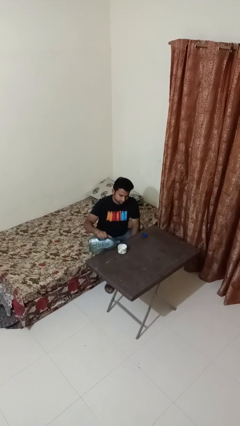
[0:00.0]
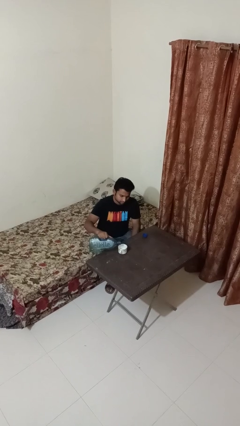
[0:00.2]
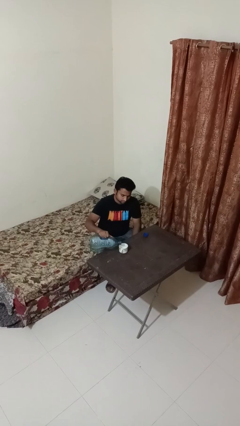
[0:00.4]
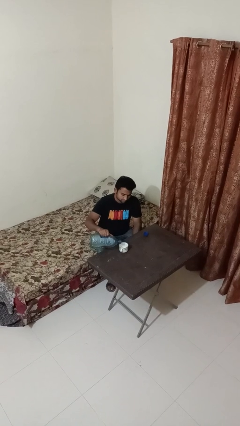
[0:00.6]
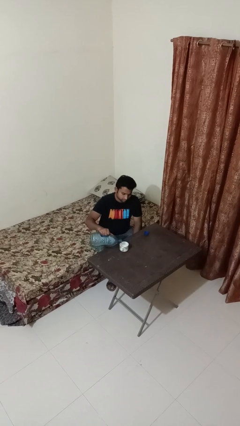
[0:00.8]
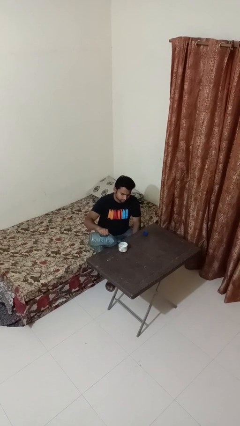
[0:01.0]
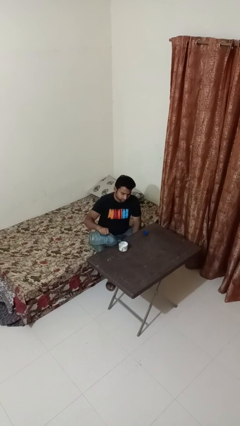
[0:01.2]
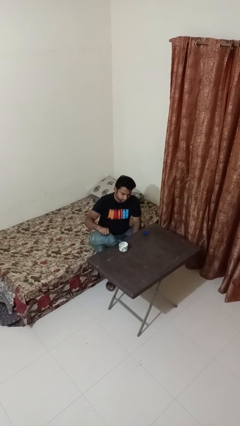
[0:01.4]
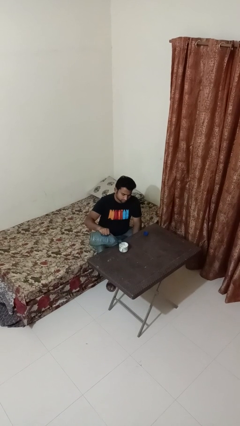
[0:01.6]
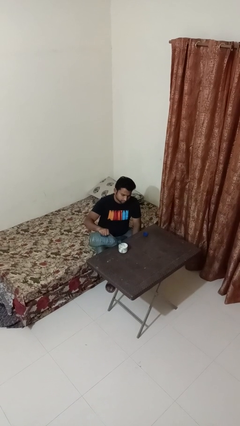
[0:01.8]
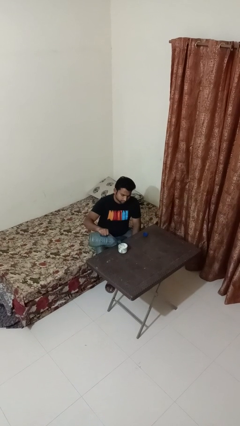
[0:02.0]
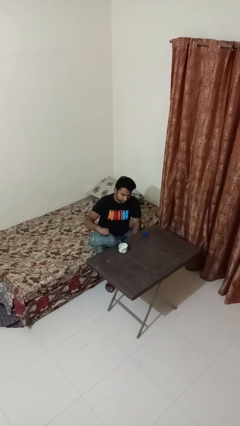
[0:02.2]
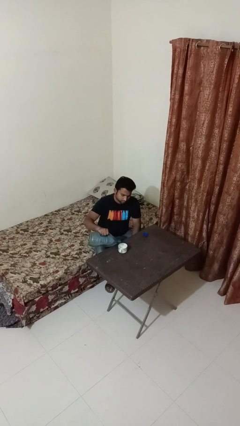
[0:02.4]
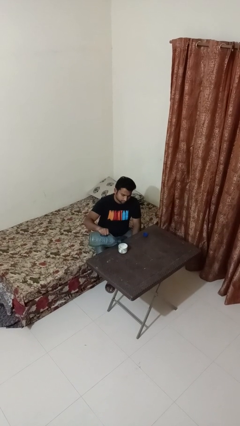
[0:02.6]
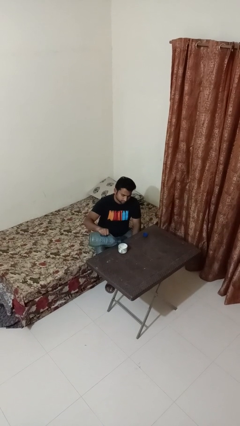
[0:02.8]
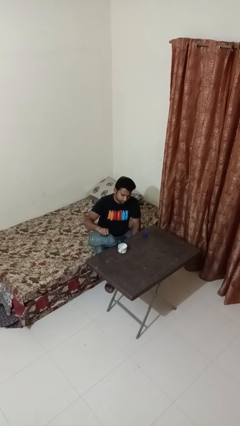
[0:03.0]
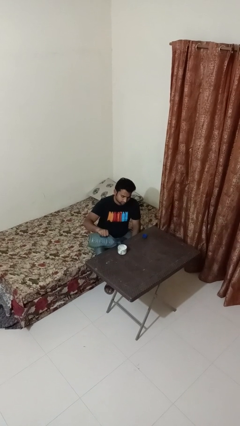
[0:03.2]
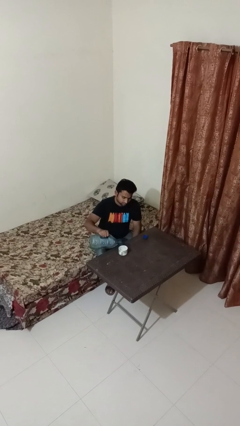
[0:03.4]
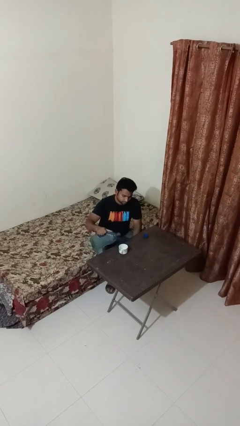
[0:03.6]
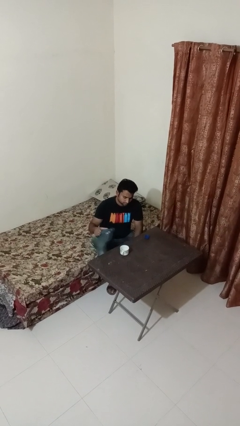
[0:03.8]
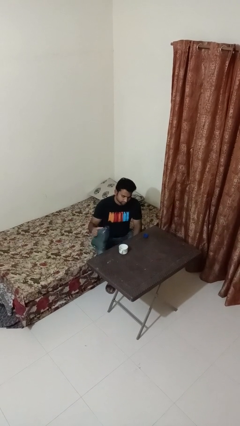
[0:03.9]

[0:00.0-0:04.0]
person pours liquid into cup

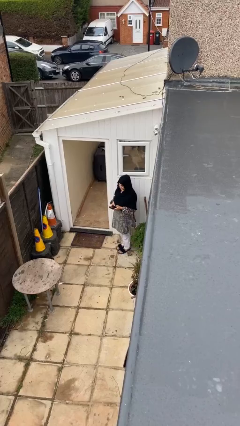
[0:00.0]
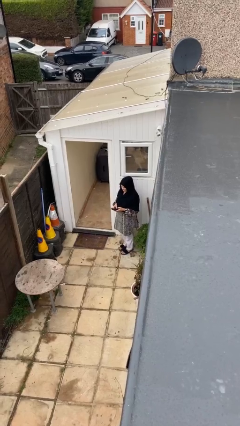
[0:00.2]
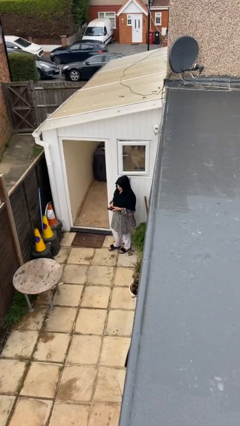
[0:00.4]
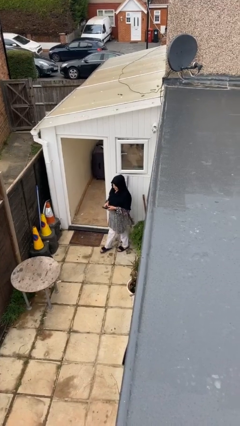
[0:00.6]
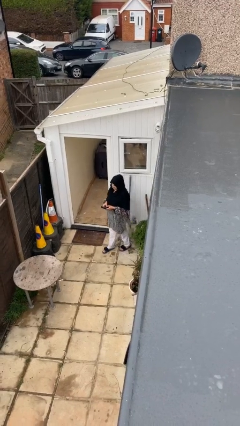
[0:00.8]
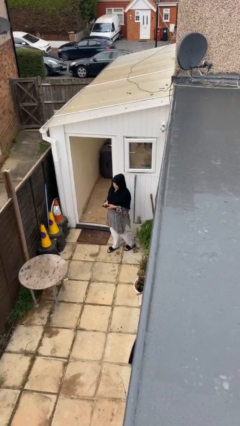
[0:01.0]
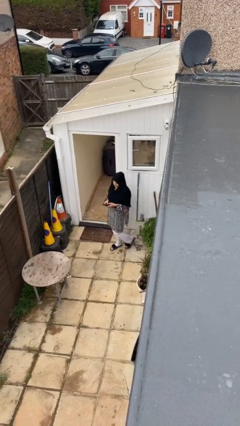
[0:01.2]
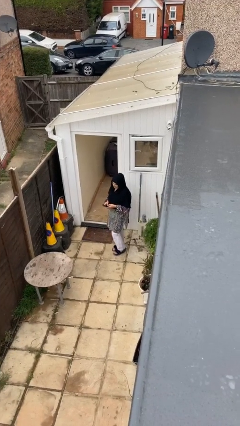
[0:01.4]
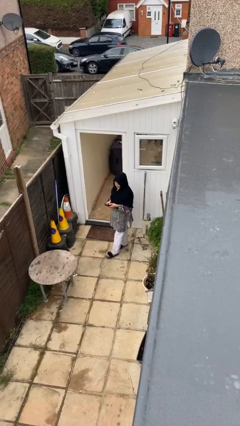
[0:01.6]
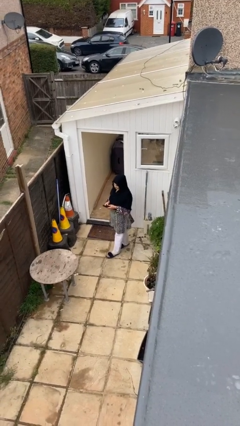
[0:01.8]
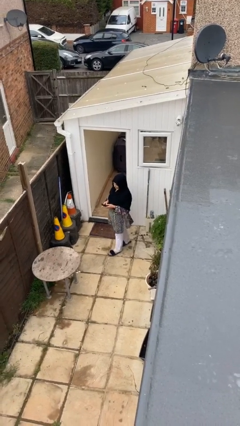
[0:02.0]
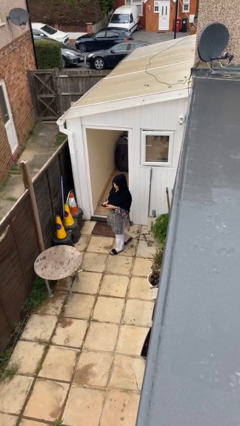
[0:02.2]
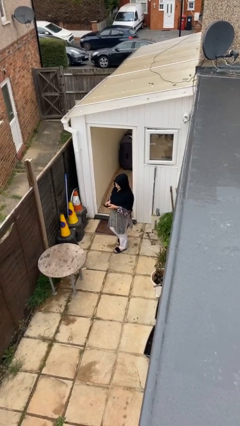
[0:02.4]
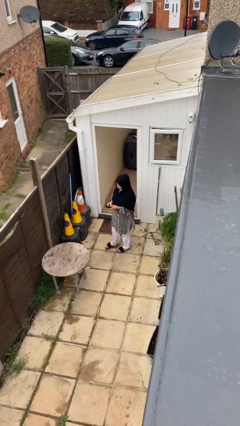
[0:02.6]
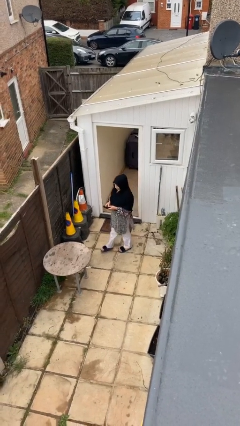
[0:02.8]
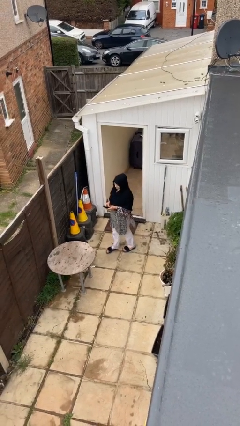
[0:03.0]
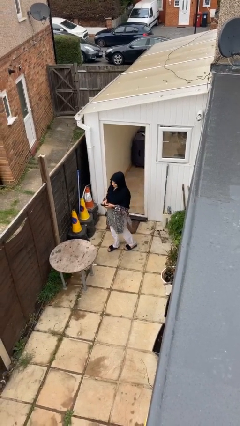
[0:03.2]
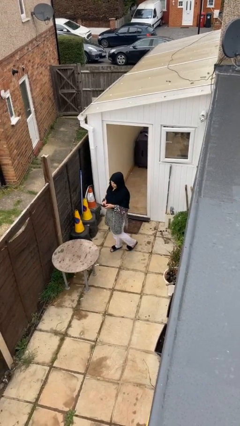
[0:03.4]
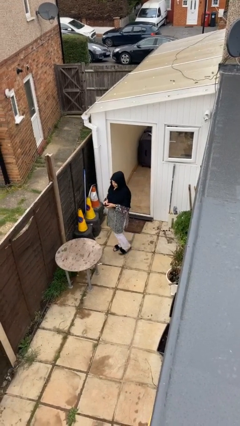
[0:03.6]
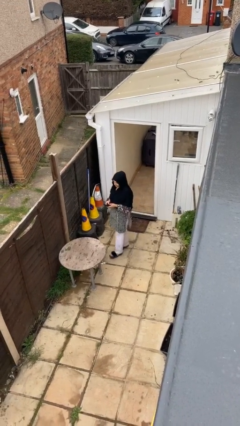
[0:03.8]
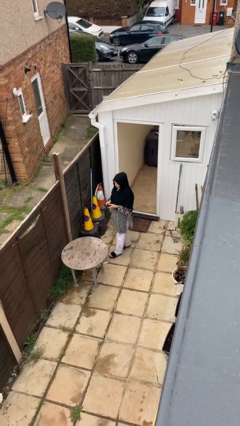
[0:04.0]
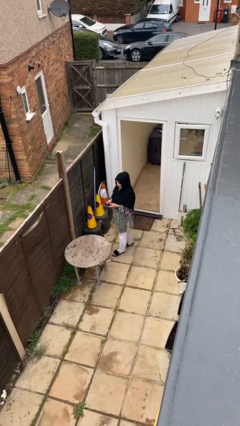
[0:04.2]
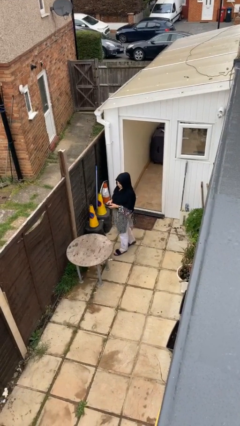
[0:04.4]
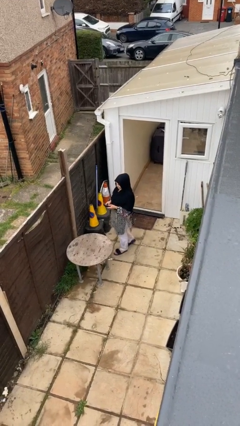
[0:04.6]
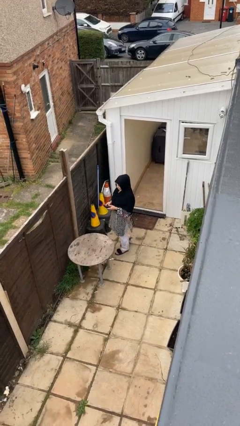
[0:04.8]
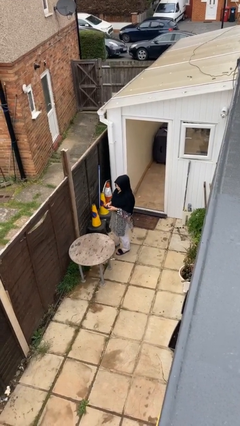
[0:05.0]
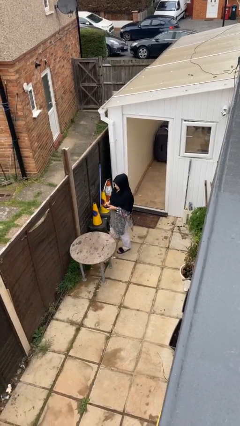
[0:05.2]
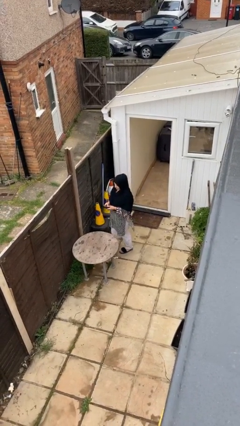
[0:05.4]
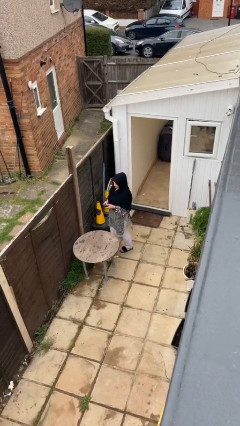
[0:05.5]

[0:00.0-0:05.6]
person texts on phone

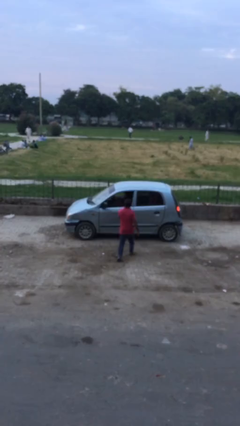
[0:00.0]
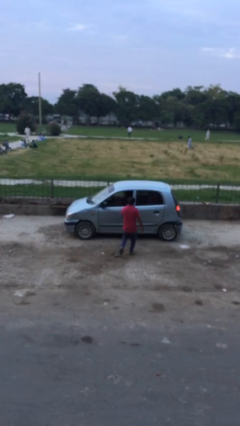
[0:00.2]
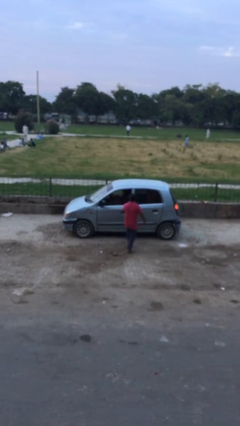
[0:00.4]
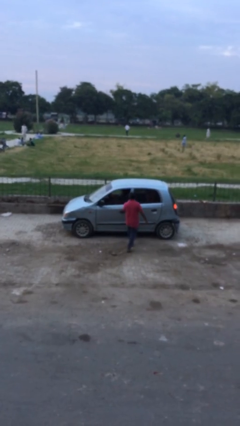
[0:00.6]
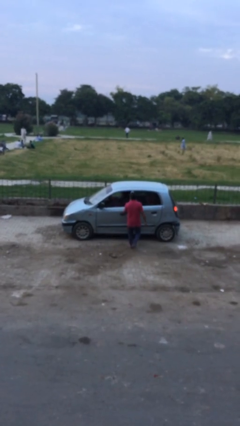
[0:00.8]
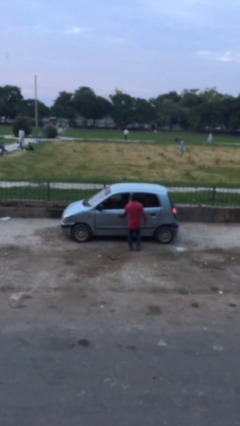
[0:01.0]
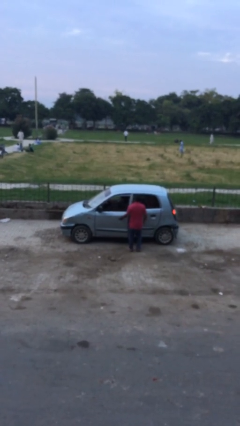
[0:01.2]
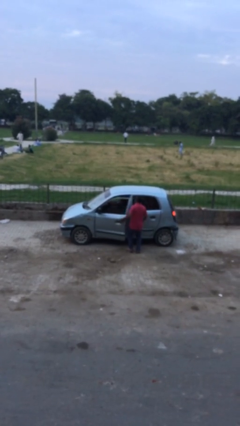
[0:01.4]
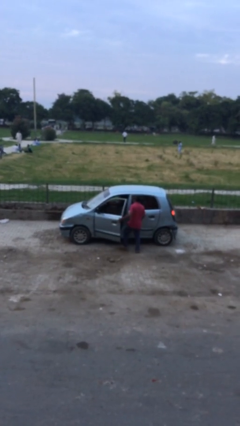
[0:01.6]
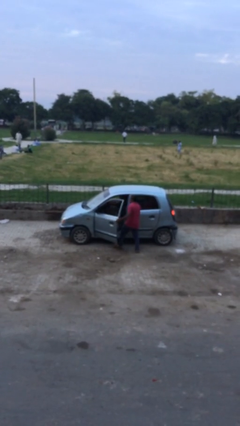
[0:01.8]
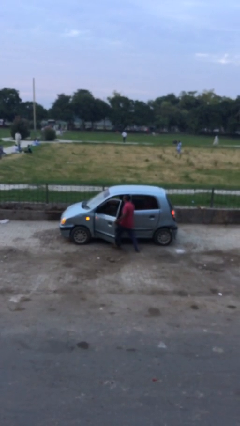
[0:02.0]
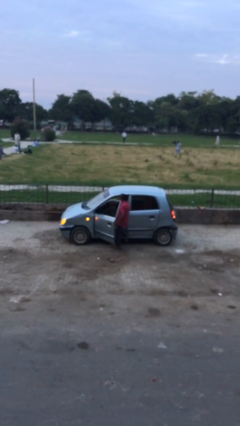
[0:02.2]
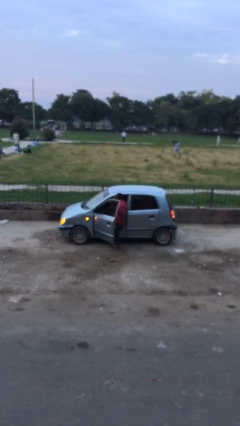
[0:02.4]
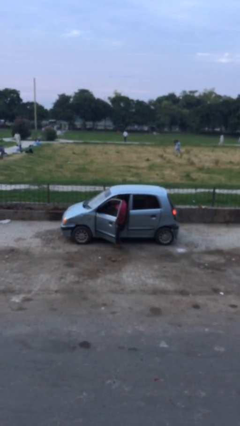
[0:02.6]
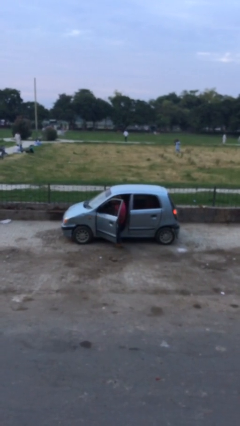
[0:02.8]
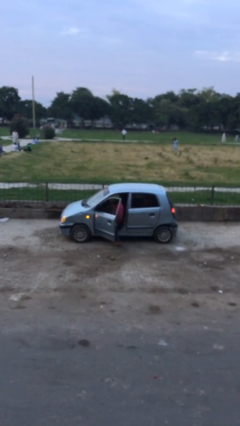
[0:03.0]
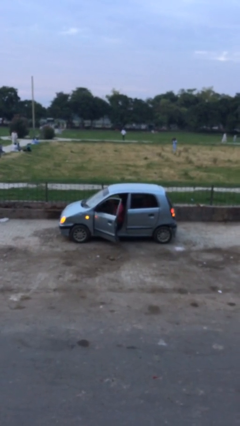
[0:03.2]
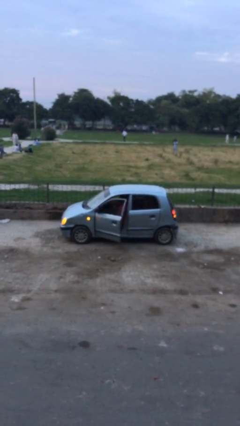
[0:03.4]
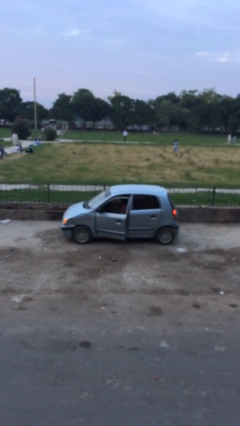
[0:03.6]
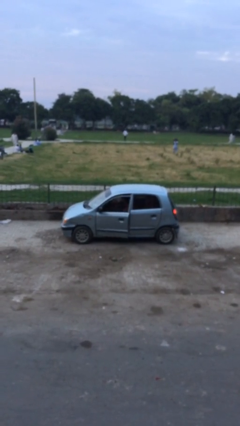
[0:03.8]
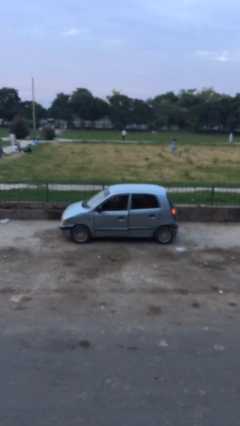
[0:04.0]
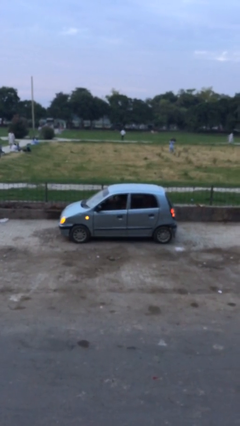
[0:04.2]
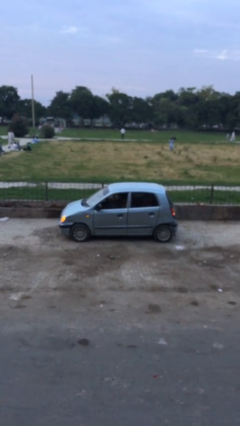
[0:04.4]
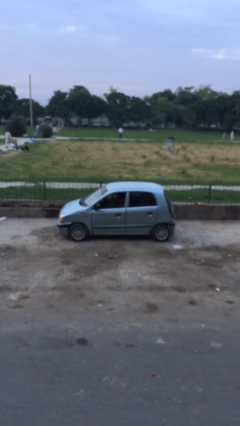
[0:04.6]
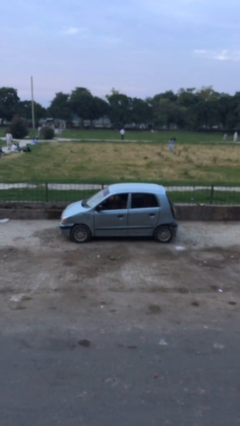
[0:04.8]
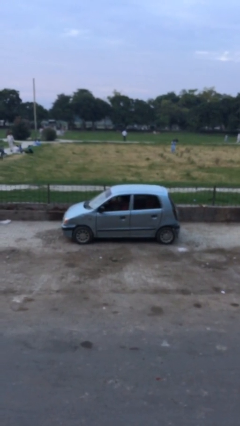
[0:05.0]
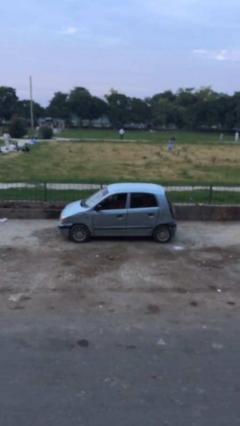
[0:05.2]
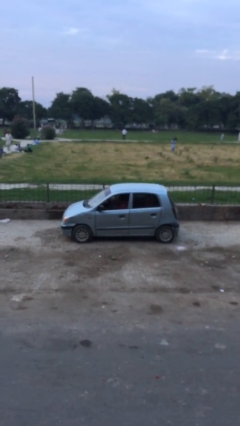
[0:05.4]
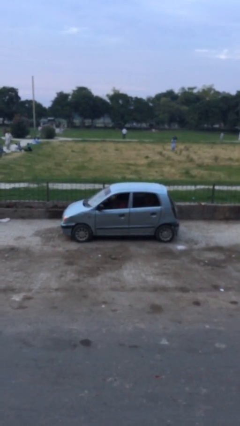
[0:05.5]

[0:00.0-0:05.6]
car picks up person

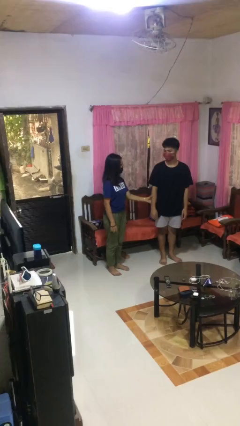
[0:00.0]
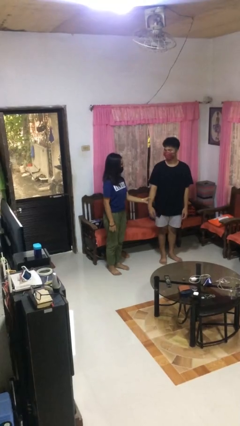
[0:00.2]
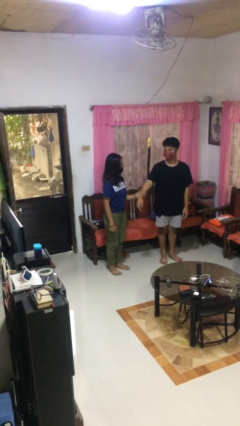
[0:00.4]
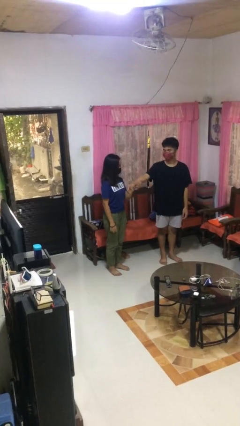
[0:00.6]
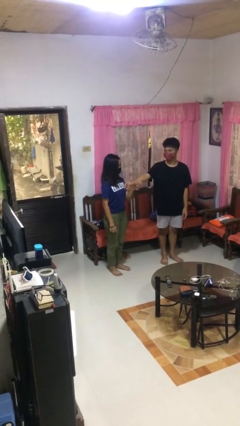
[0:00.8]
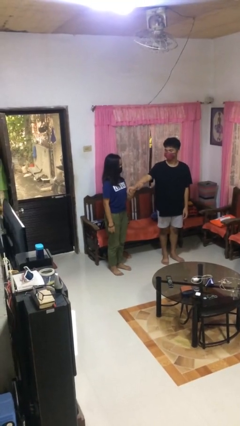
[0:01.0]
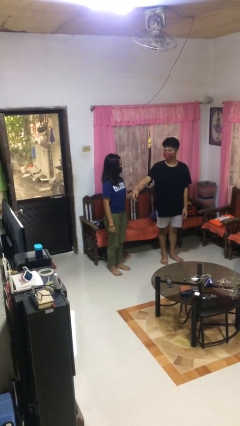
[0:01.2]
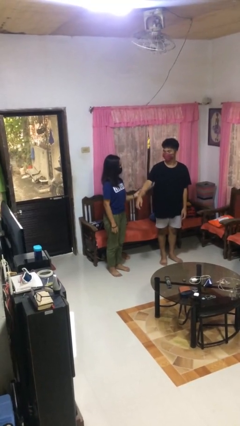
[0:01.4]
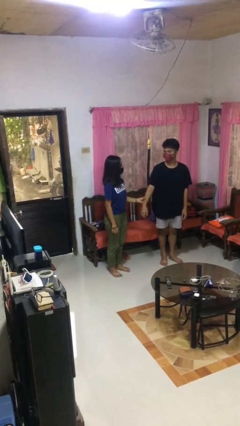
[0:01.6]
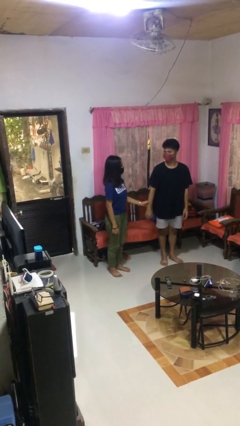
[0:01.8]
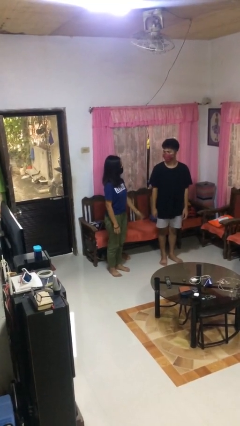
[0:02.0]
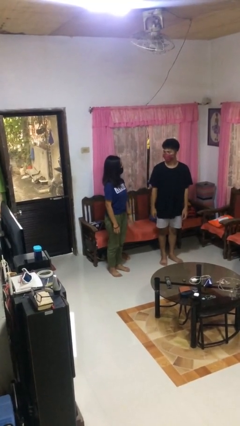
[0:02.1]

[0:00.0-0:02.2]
person grabs person by forearm

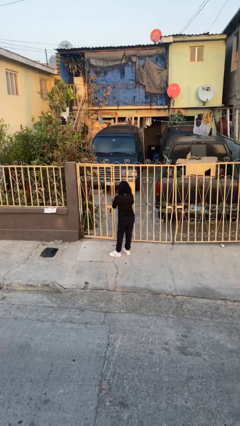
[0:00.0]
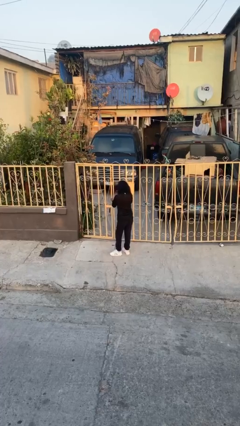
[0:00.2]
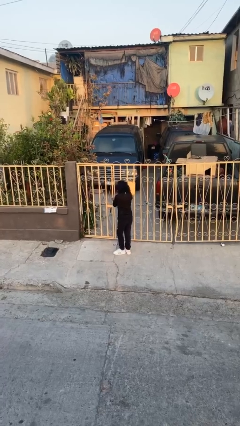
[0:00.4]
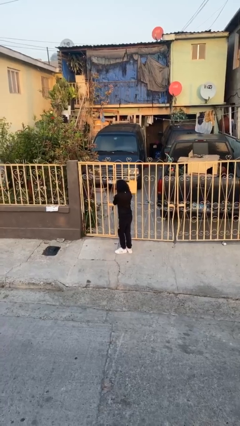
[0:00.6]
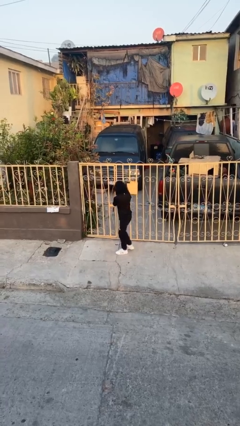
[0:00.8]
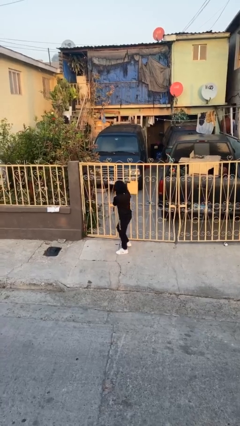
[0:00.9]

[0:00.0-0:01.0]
person closes facility door
